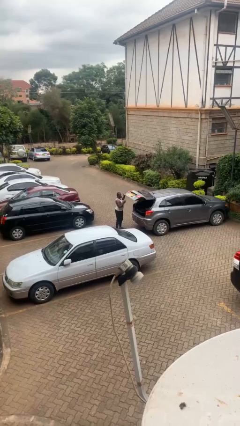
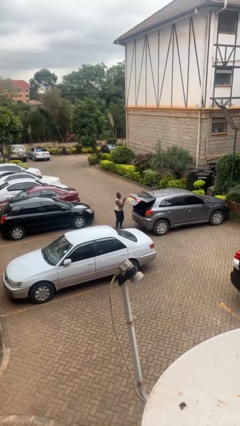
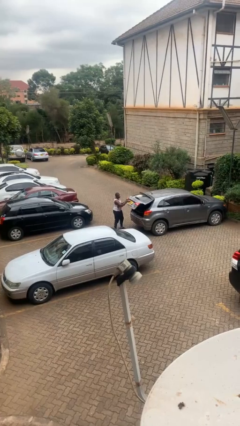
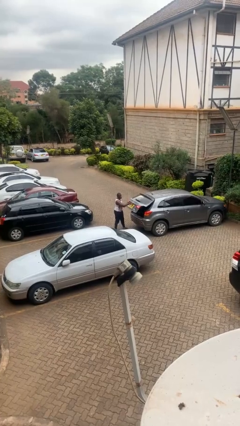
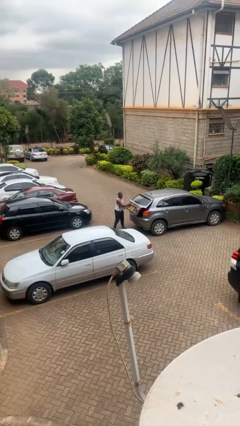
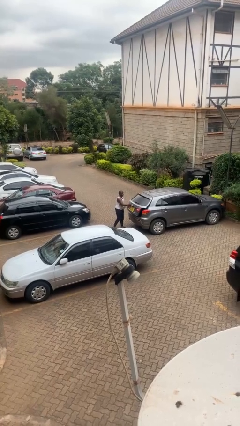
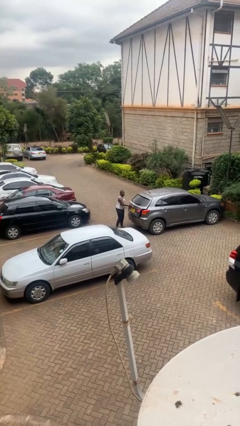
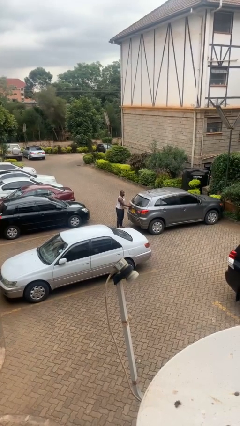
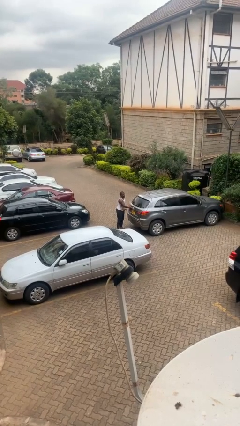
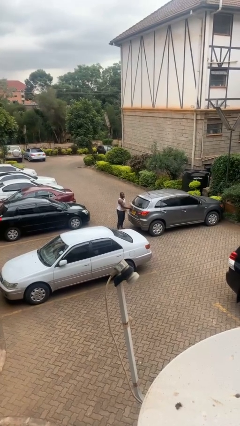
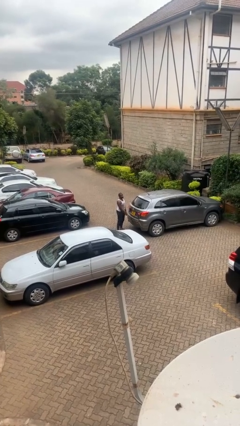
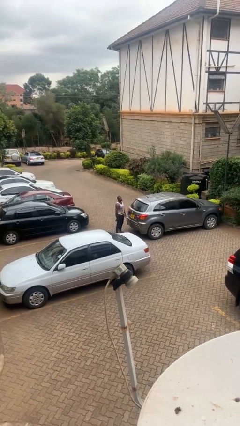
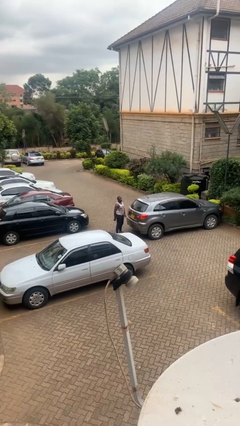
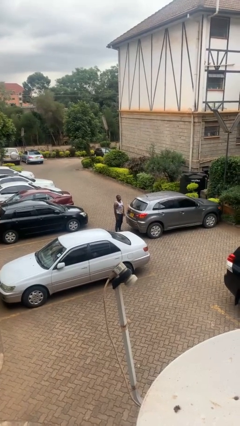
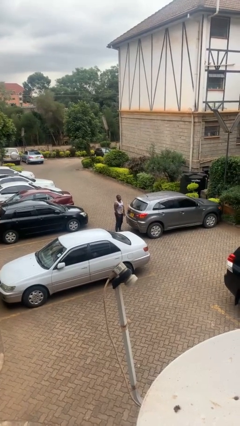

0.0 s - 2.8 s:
person closes car trunk

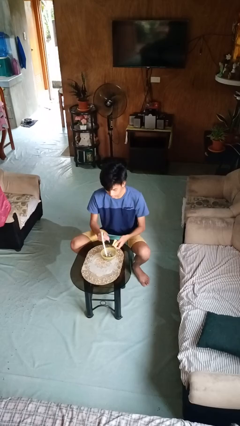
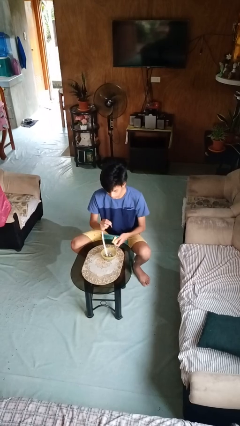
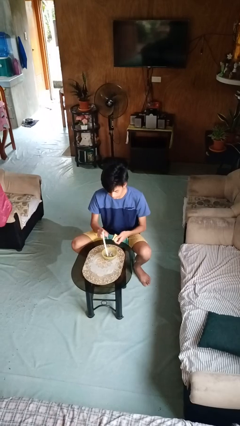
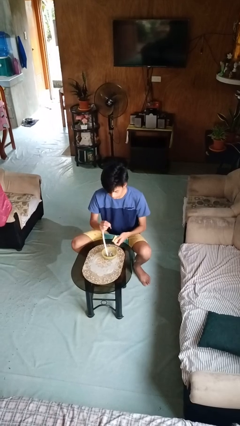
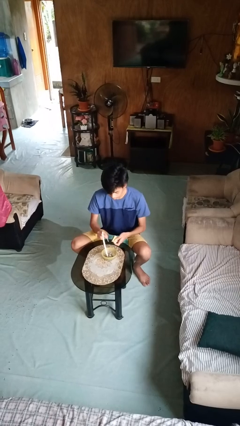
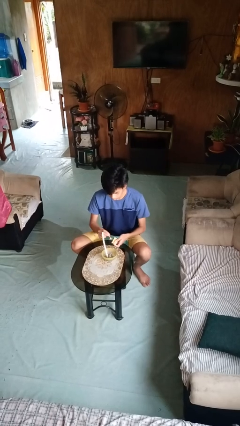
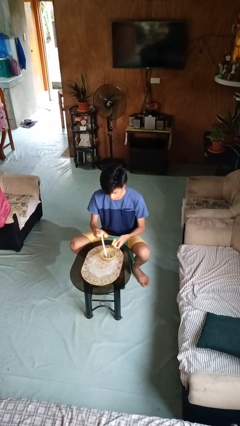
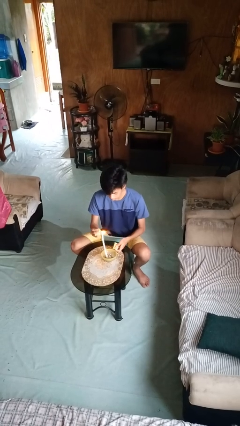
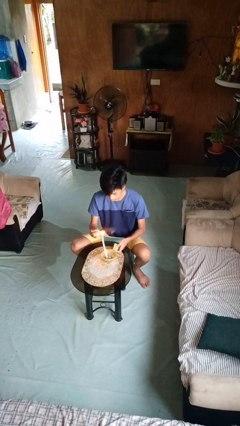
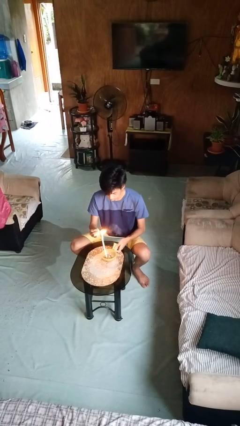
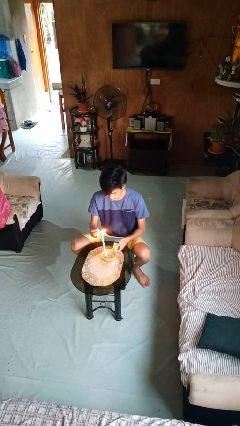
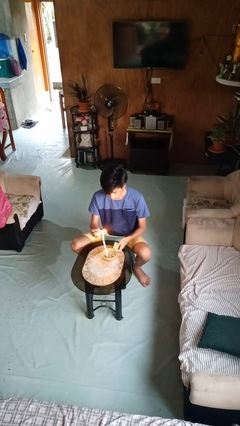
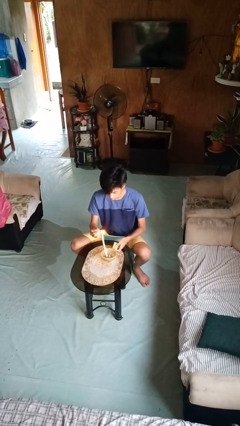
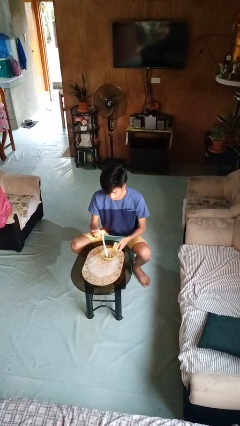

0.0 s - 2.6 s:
person lights candle

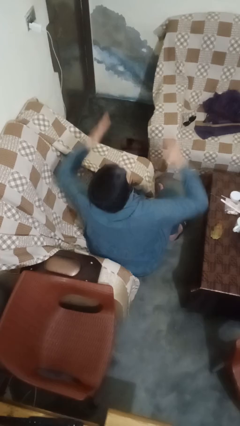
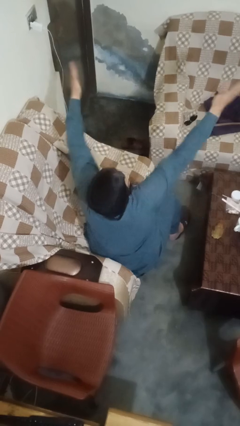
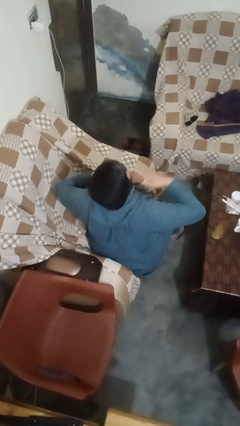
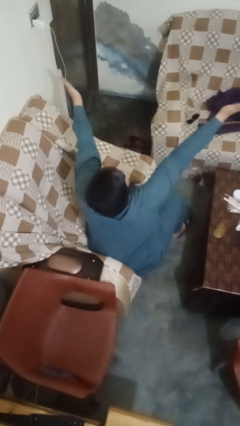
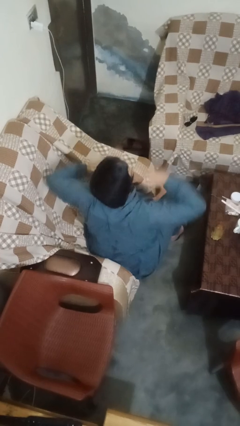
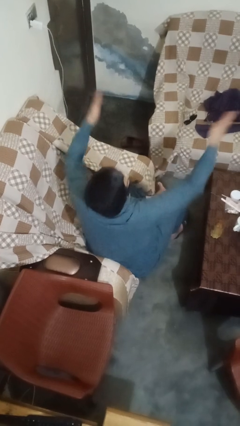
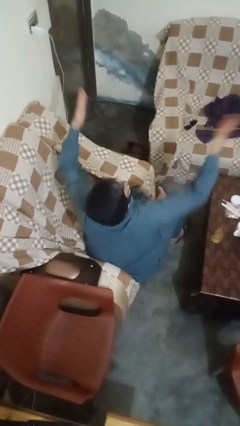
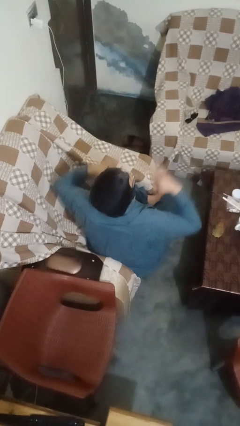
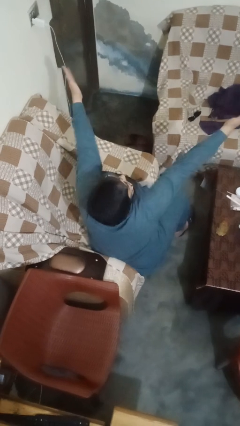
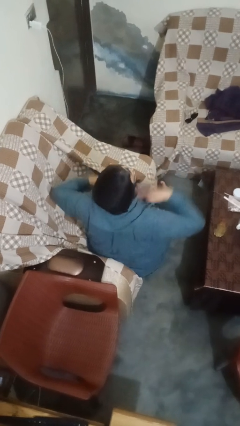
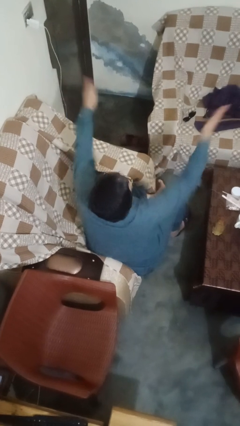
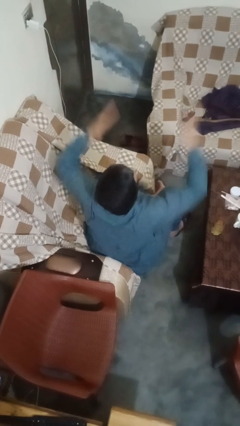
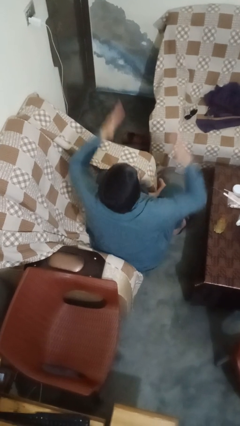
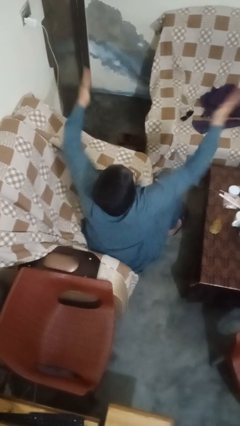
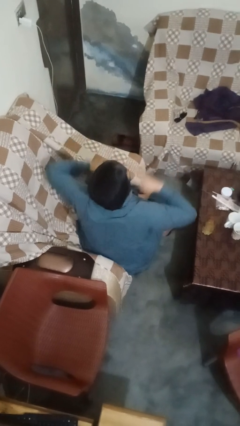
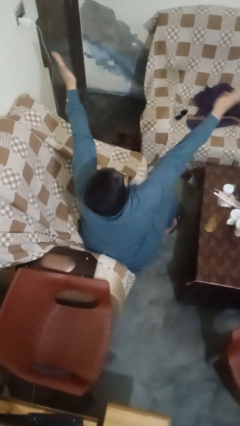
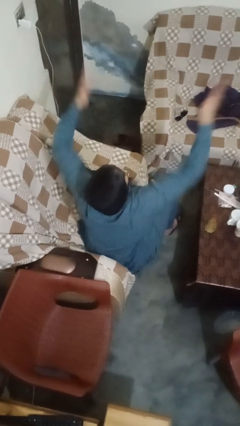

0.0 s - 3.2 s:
person drums on chest

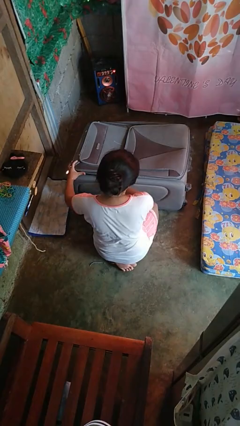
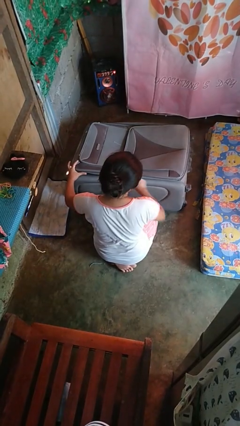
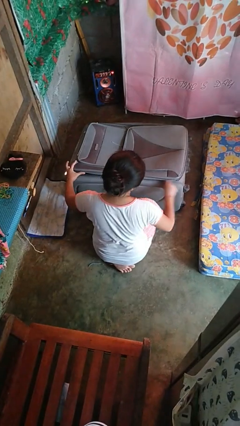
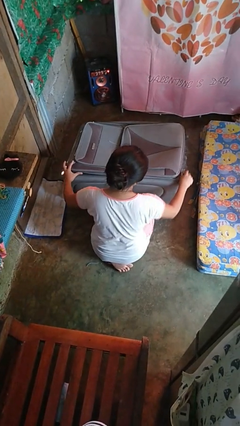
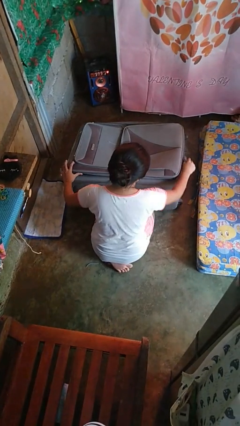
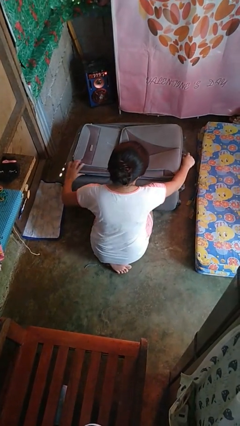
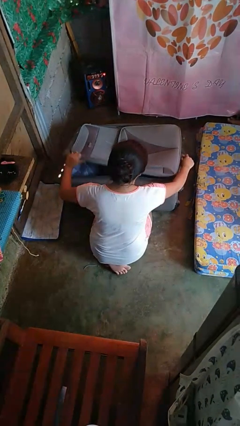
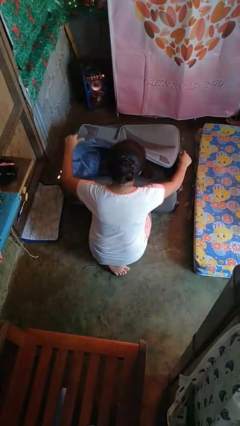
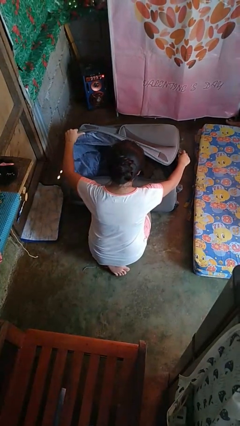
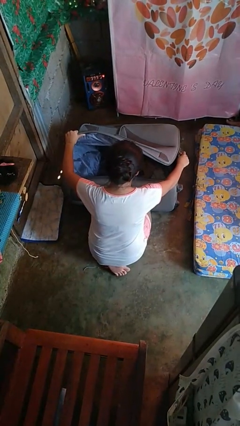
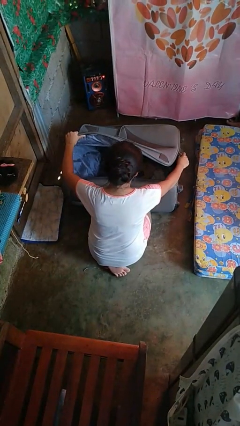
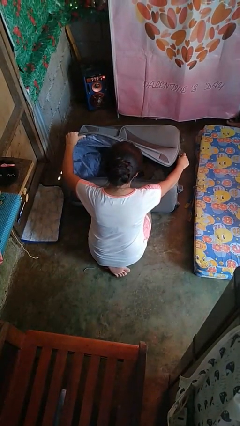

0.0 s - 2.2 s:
person opens suitcase

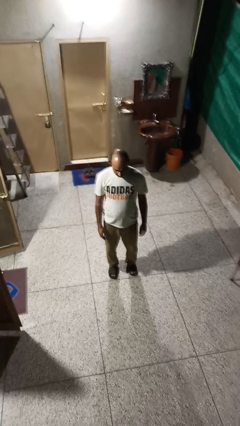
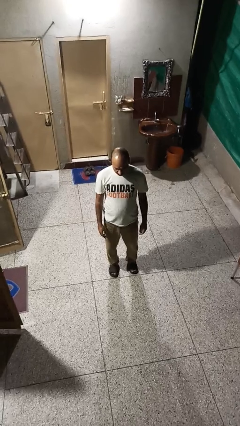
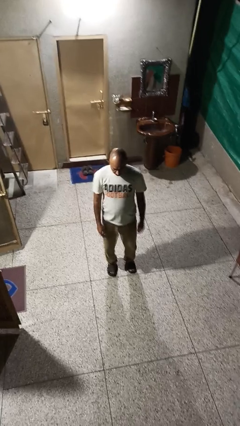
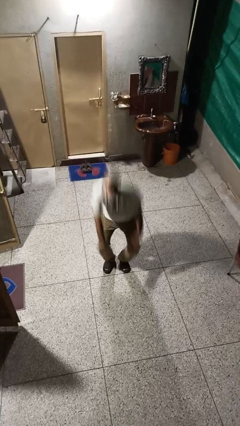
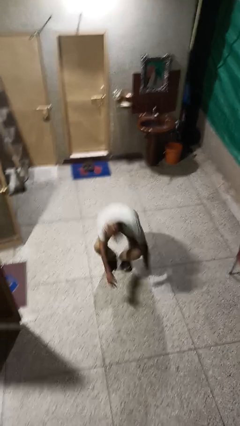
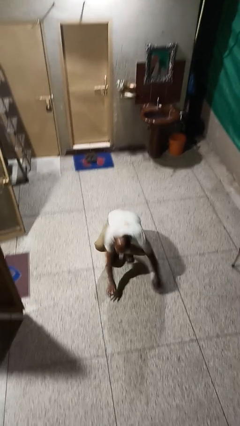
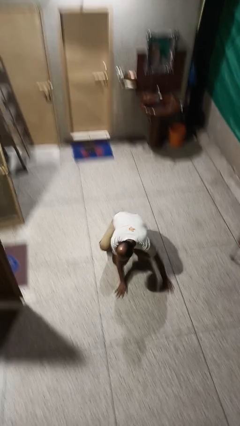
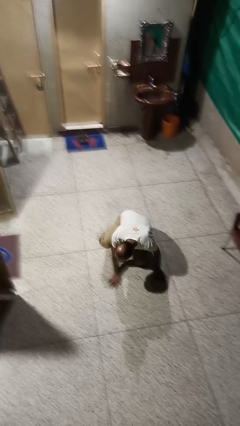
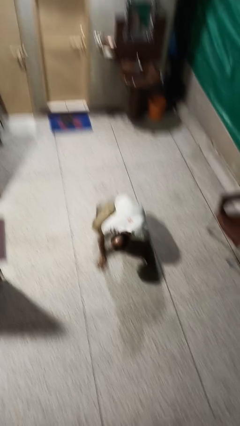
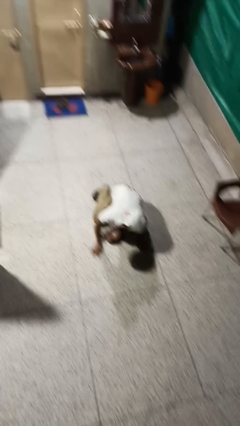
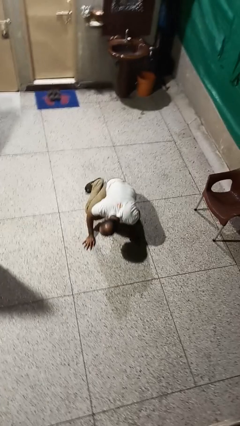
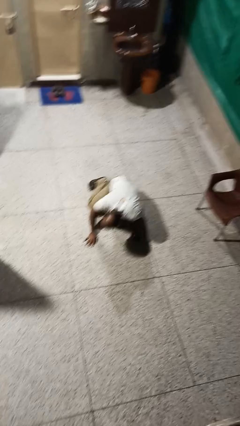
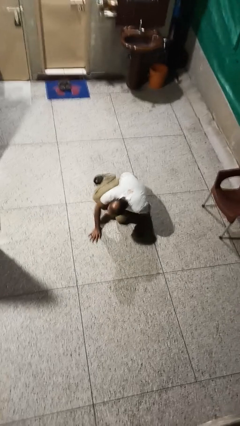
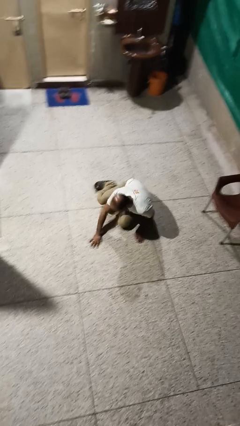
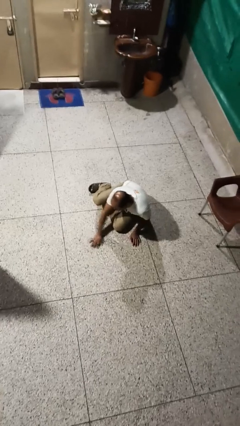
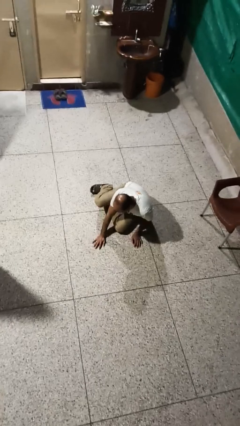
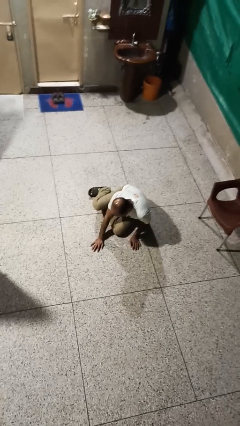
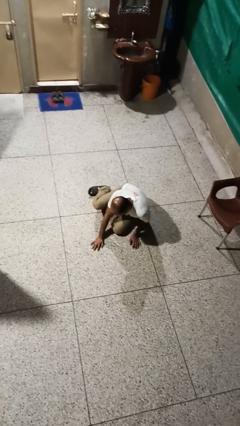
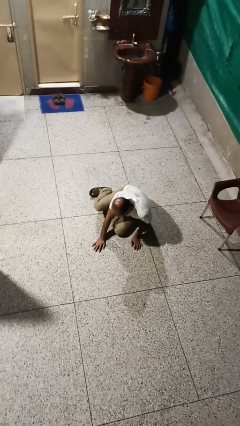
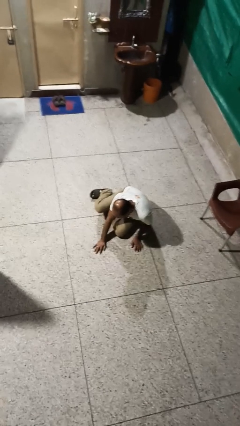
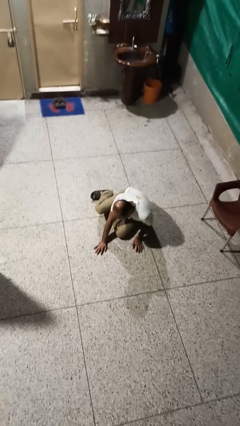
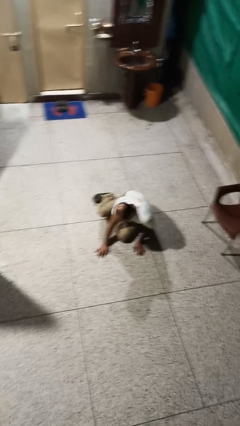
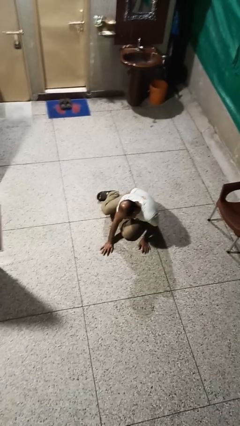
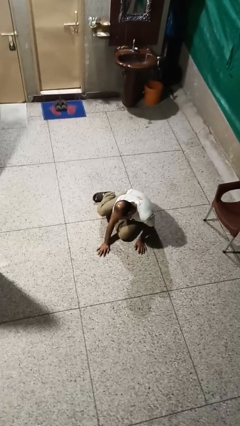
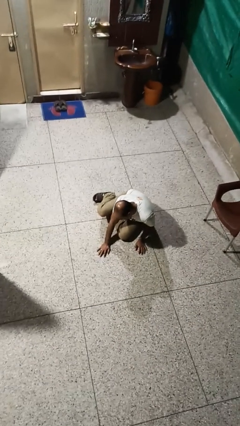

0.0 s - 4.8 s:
person falls while standing

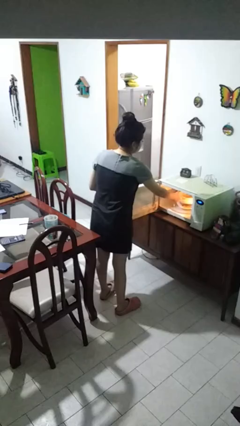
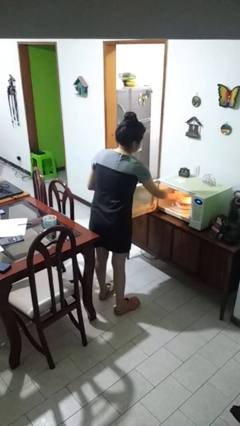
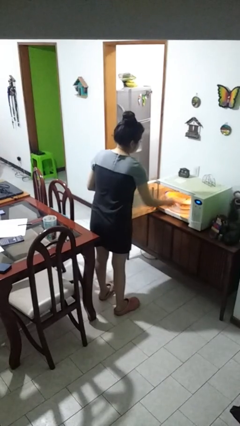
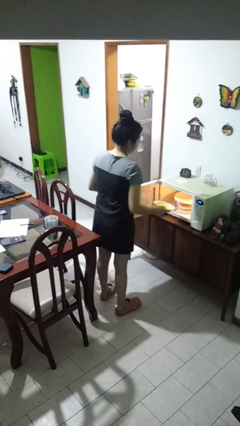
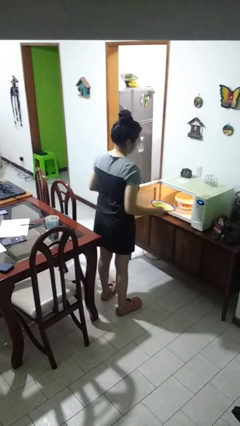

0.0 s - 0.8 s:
person takes object from microwave

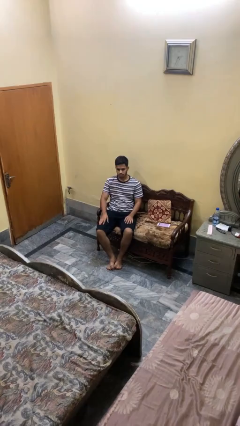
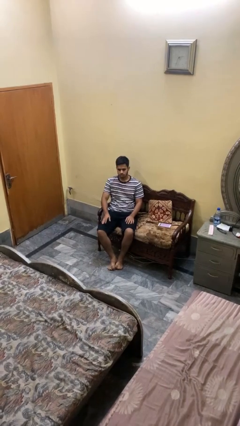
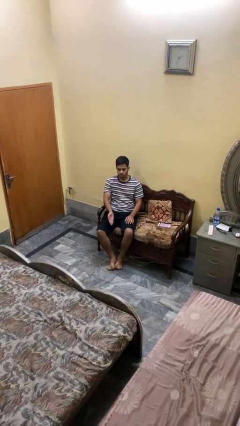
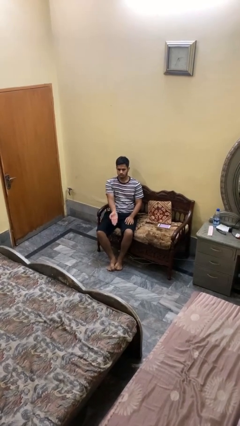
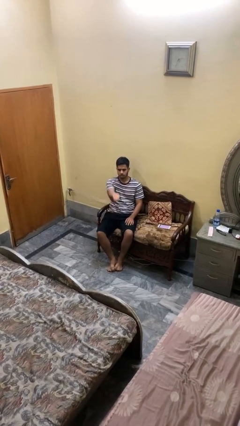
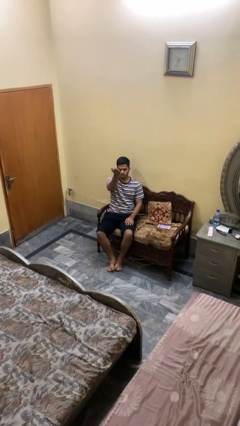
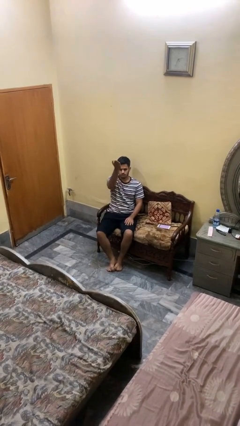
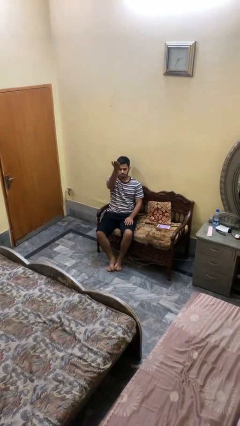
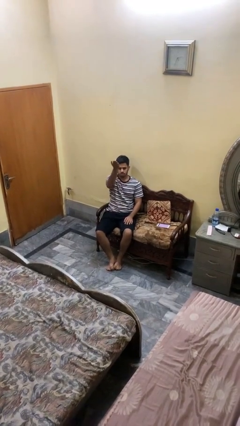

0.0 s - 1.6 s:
person gestures swipe up
